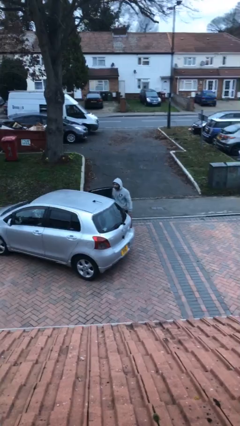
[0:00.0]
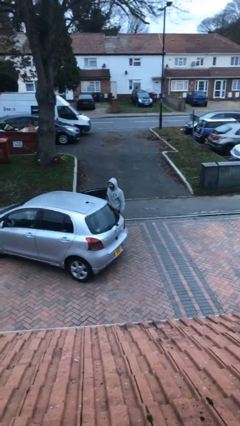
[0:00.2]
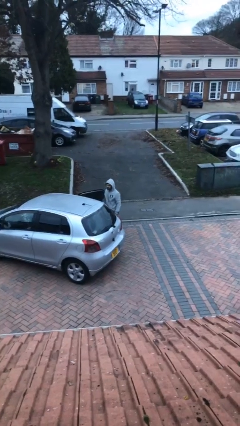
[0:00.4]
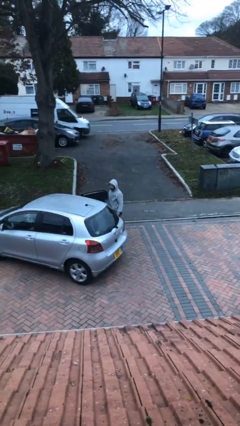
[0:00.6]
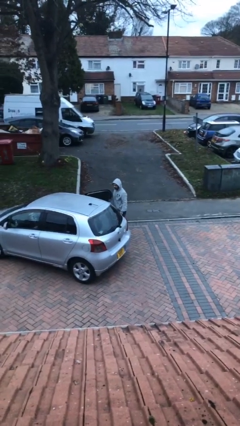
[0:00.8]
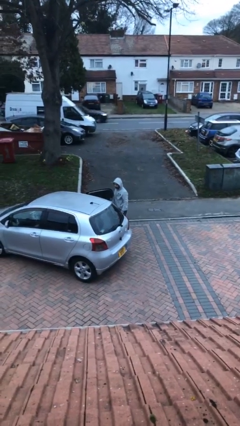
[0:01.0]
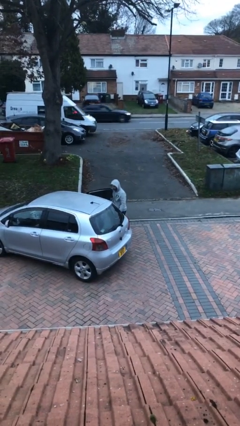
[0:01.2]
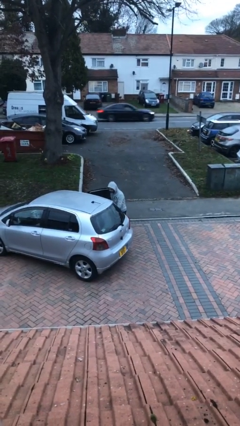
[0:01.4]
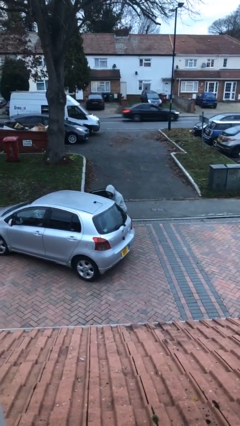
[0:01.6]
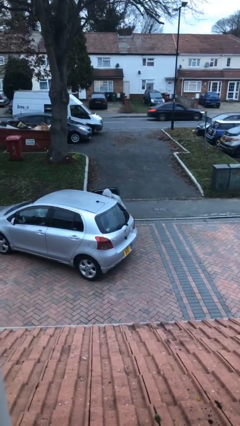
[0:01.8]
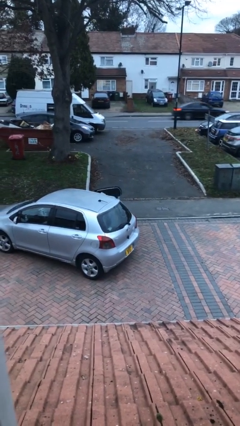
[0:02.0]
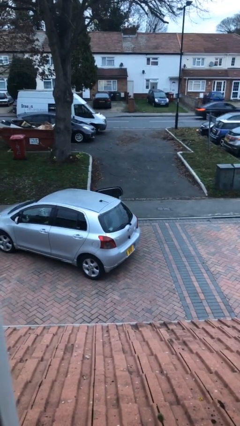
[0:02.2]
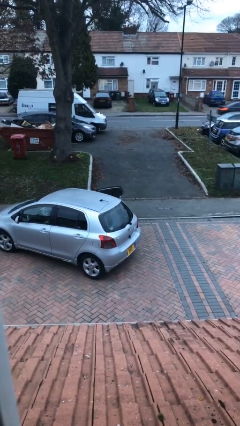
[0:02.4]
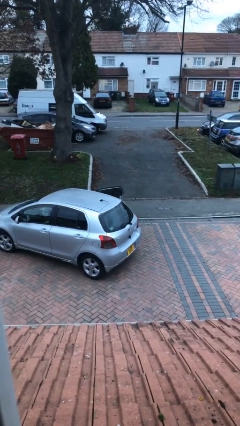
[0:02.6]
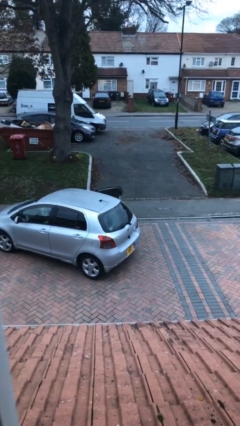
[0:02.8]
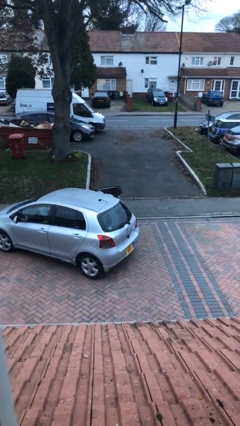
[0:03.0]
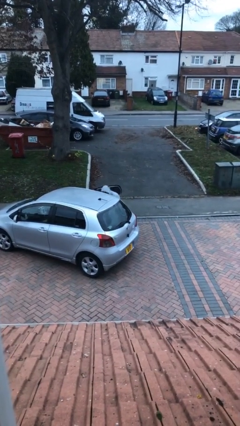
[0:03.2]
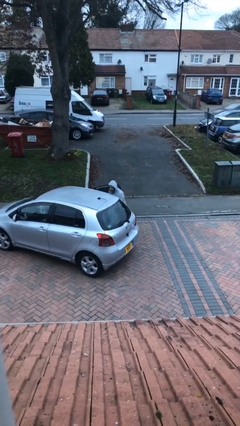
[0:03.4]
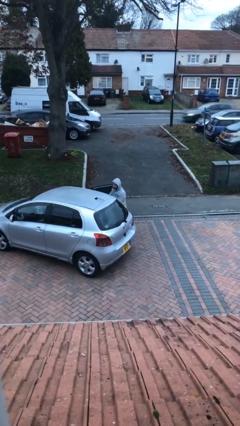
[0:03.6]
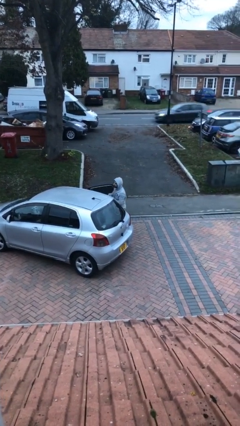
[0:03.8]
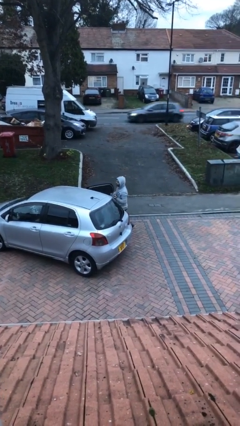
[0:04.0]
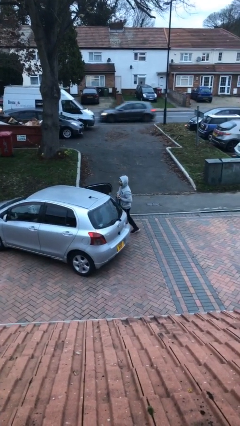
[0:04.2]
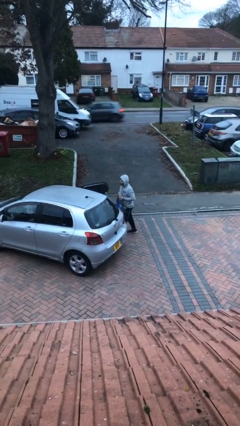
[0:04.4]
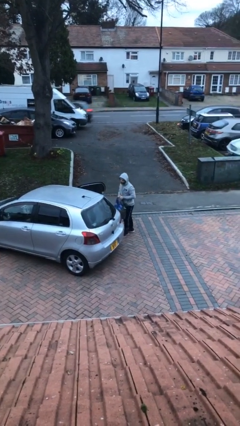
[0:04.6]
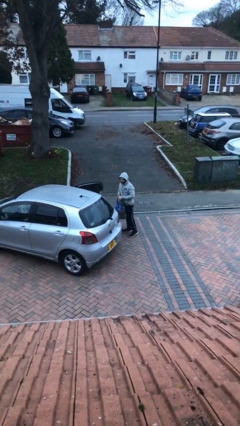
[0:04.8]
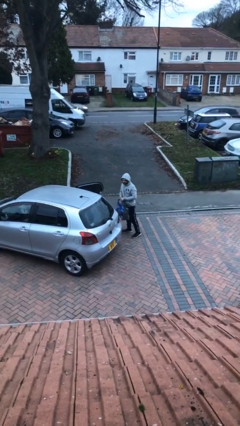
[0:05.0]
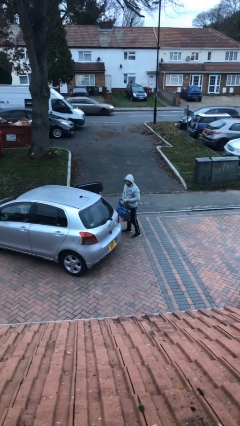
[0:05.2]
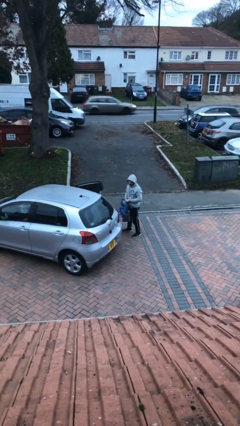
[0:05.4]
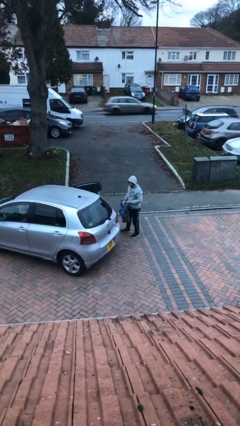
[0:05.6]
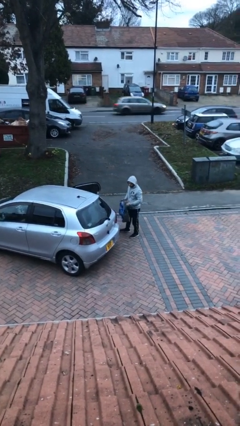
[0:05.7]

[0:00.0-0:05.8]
person unloads car

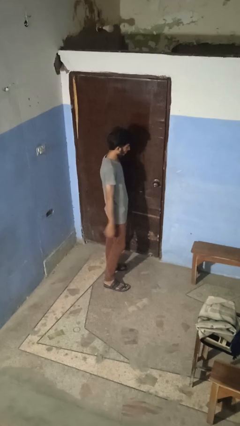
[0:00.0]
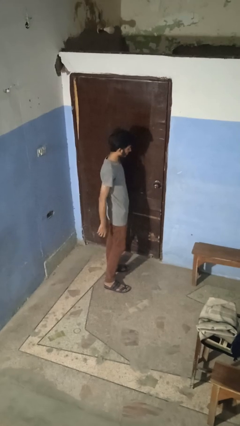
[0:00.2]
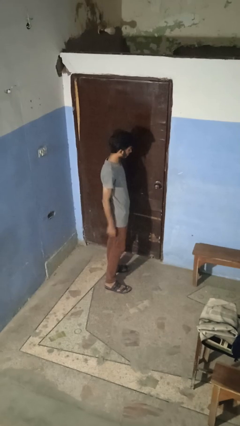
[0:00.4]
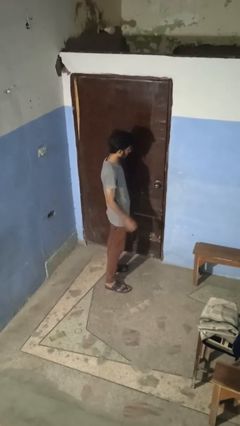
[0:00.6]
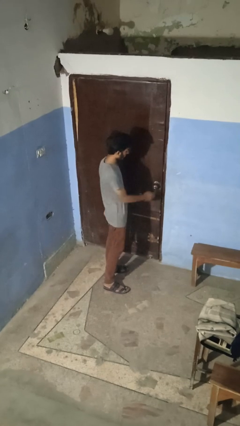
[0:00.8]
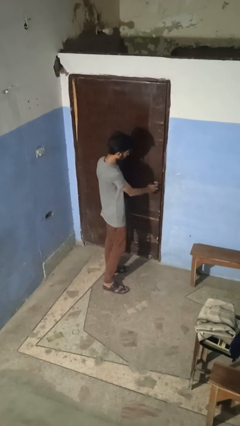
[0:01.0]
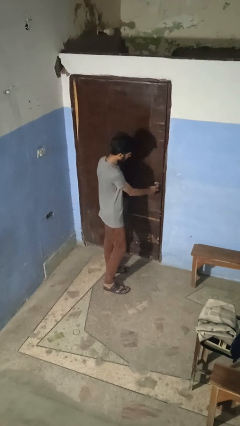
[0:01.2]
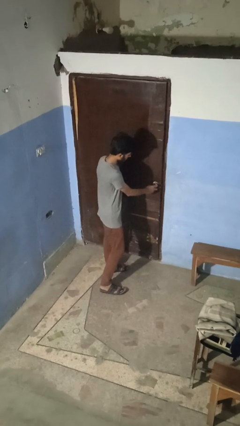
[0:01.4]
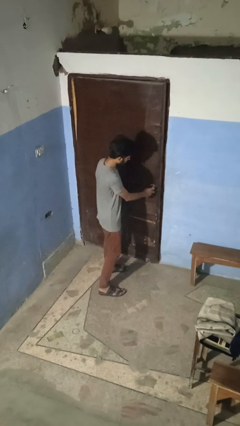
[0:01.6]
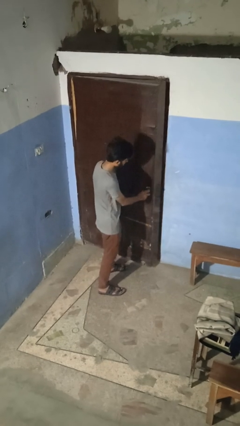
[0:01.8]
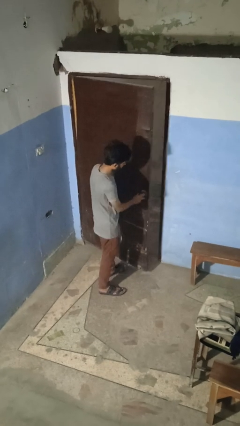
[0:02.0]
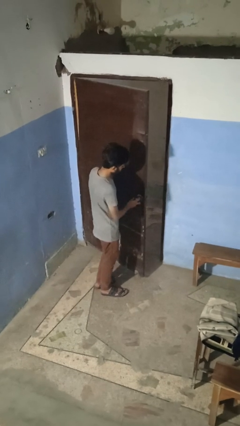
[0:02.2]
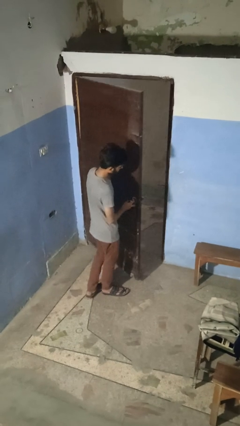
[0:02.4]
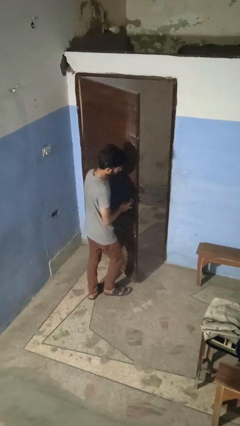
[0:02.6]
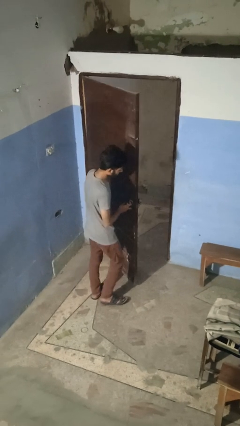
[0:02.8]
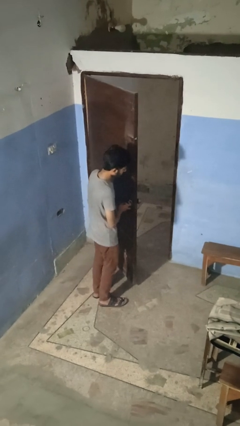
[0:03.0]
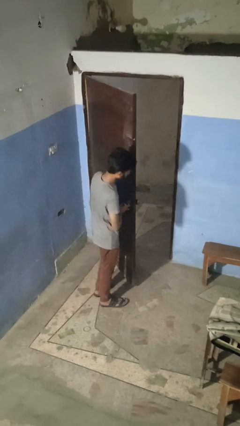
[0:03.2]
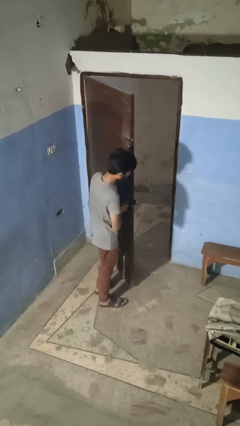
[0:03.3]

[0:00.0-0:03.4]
person opens facility door

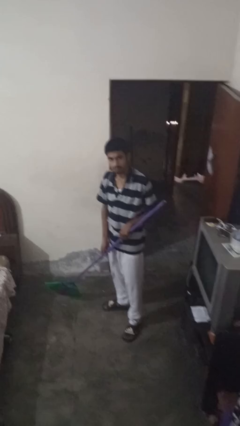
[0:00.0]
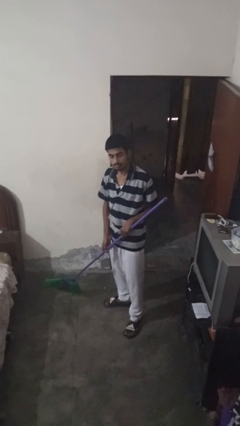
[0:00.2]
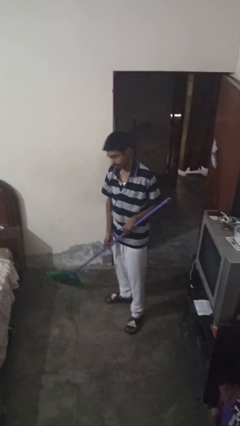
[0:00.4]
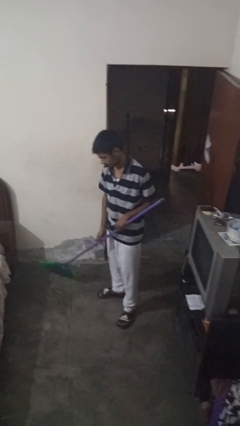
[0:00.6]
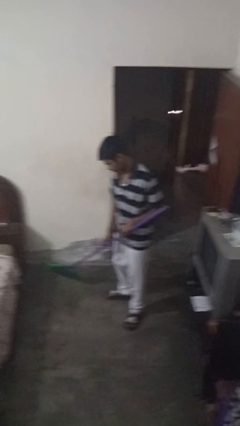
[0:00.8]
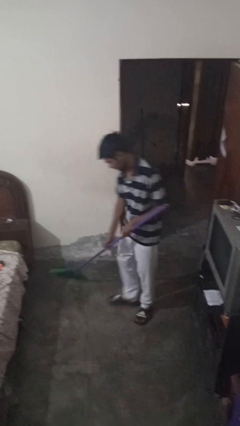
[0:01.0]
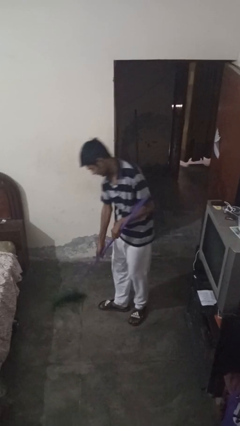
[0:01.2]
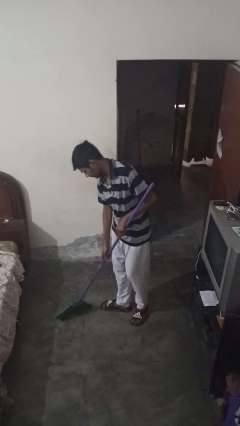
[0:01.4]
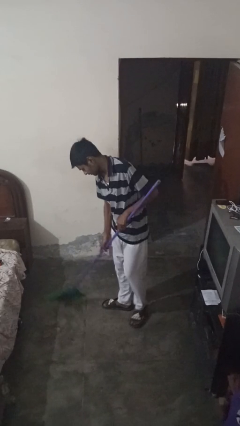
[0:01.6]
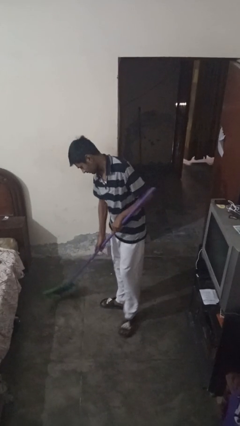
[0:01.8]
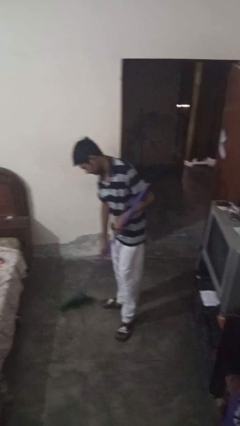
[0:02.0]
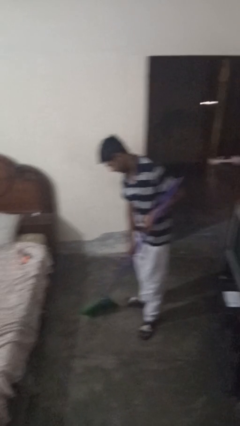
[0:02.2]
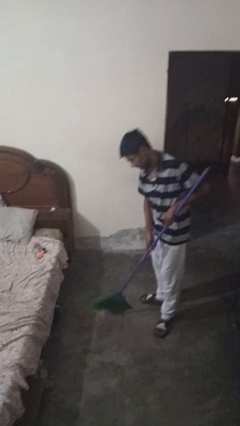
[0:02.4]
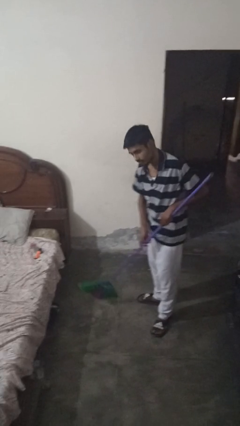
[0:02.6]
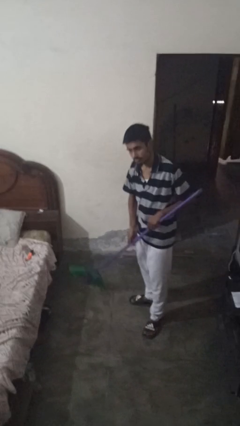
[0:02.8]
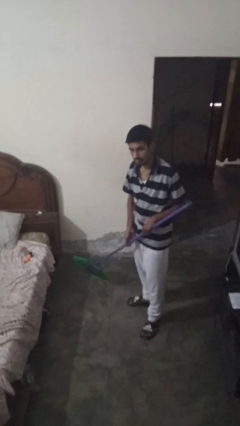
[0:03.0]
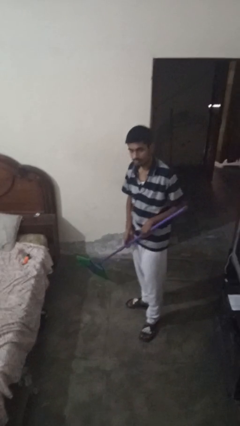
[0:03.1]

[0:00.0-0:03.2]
person sweeps floor

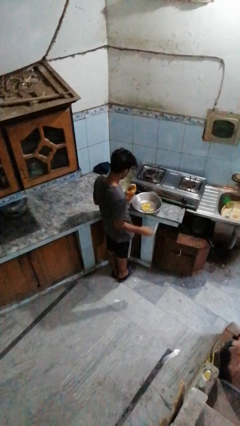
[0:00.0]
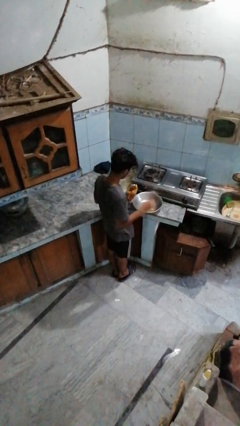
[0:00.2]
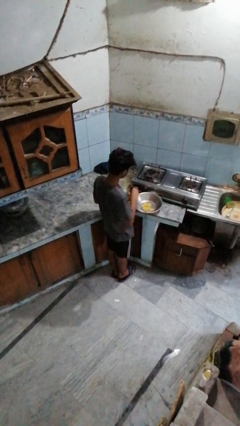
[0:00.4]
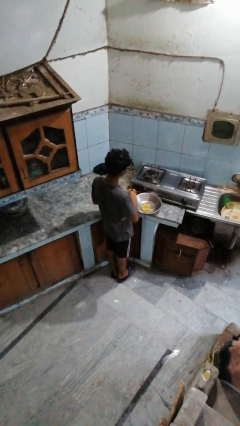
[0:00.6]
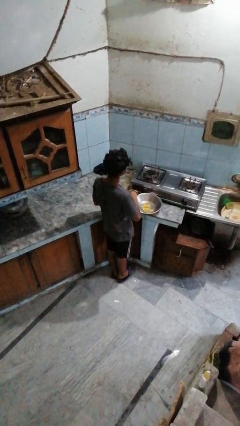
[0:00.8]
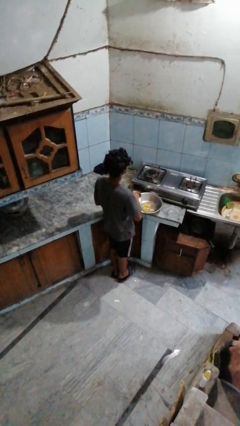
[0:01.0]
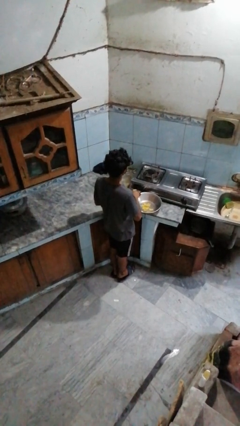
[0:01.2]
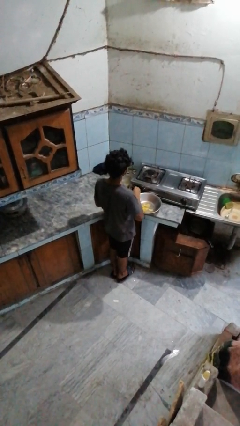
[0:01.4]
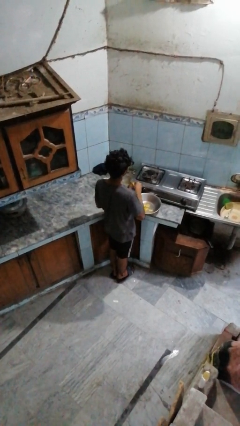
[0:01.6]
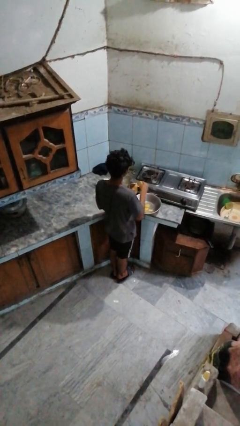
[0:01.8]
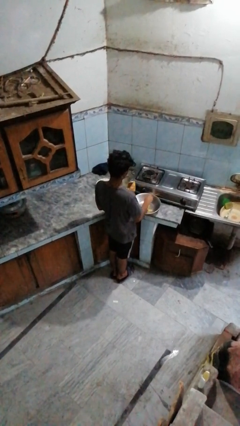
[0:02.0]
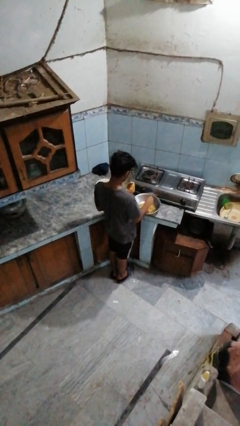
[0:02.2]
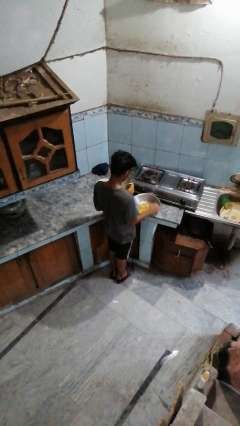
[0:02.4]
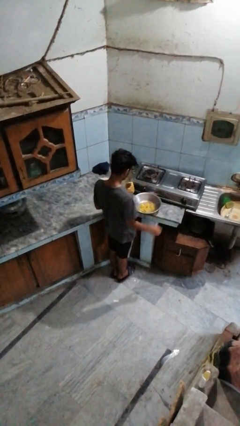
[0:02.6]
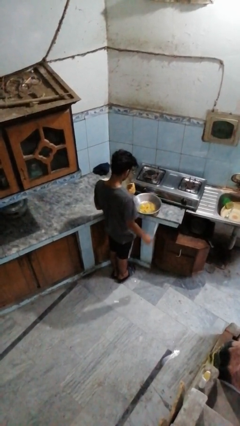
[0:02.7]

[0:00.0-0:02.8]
person pours into bowl

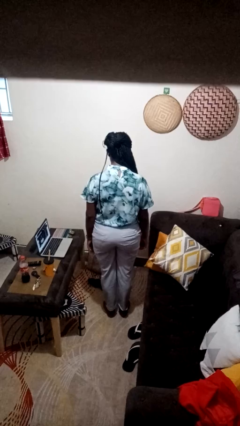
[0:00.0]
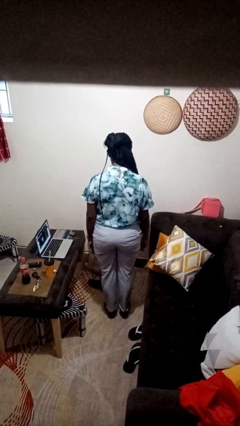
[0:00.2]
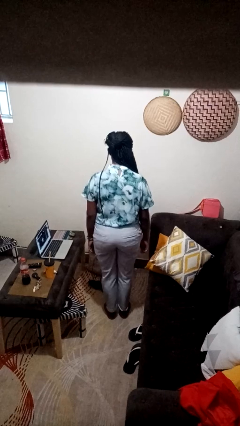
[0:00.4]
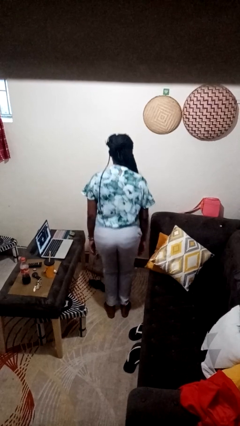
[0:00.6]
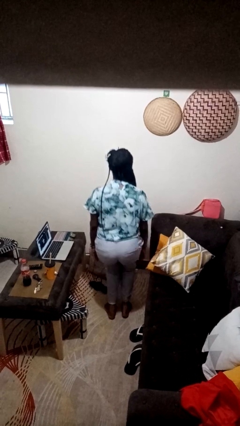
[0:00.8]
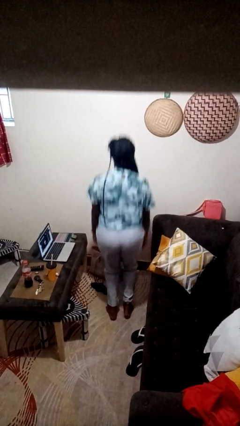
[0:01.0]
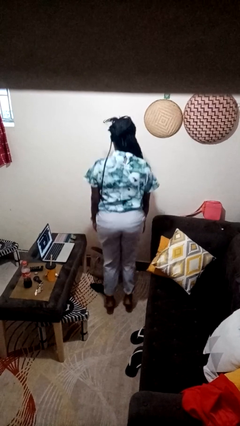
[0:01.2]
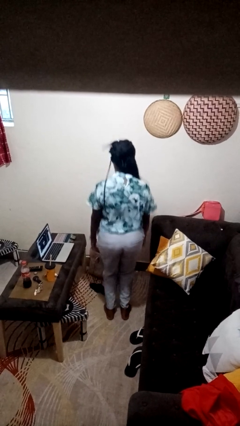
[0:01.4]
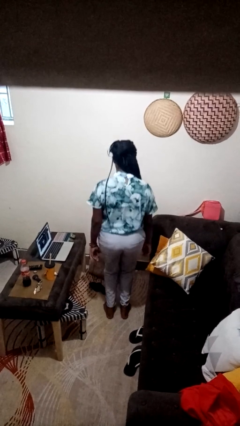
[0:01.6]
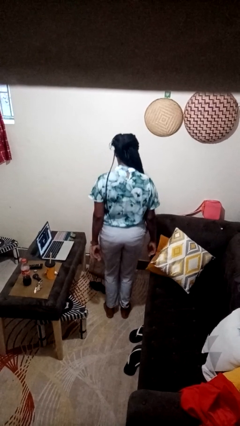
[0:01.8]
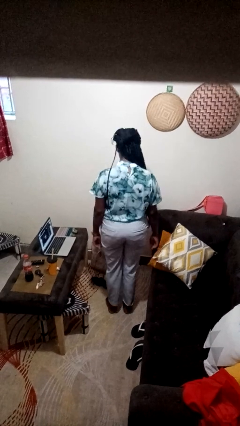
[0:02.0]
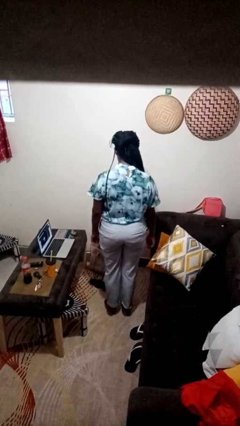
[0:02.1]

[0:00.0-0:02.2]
person jumps
